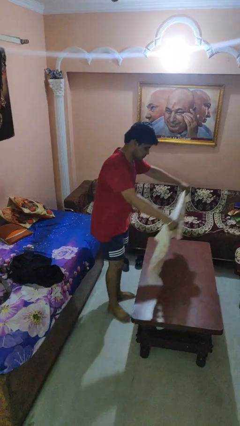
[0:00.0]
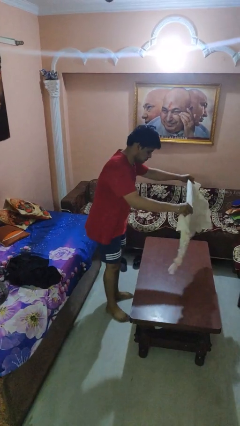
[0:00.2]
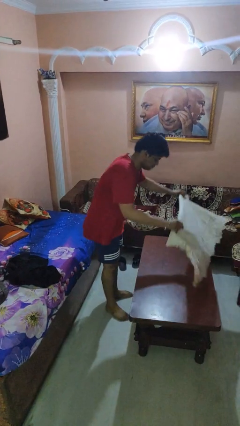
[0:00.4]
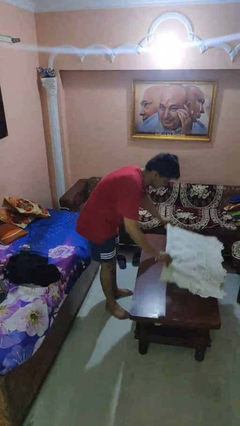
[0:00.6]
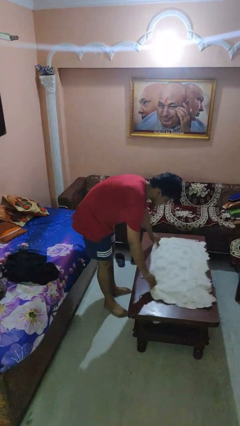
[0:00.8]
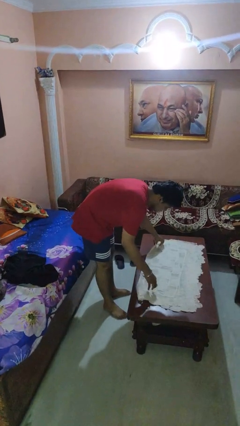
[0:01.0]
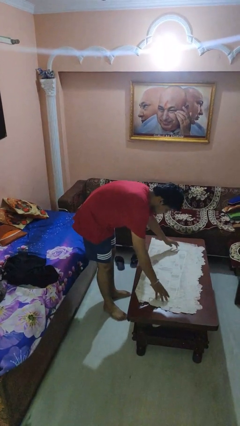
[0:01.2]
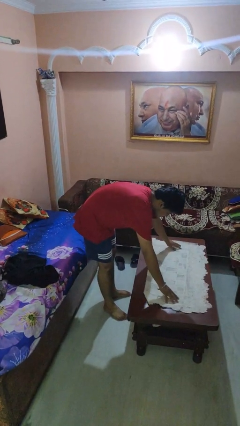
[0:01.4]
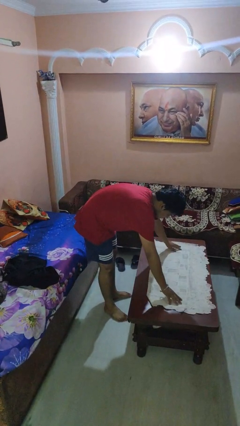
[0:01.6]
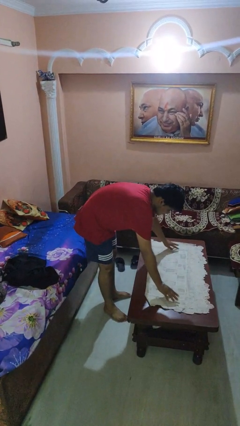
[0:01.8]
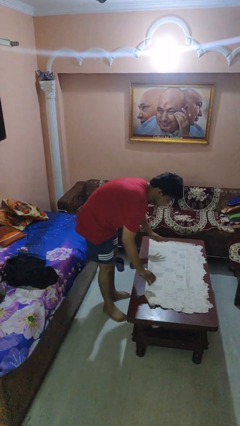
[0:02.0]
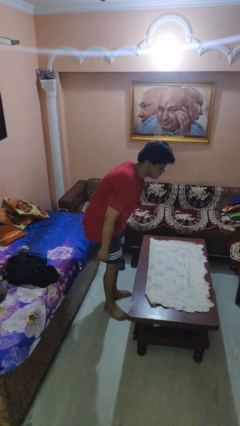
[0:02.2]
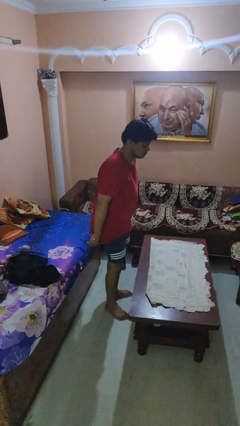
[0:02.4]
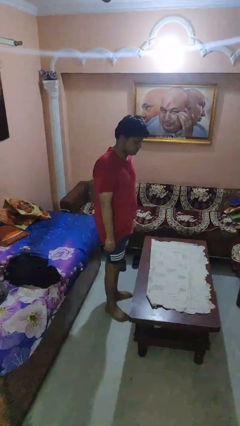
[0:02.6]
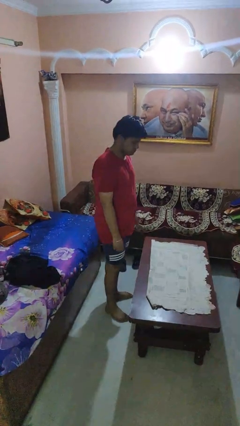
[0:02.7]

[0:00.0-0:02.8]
person spreads tablecloth

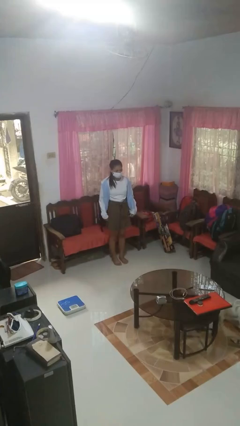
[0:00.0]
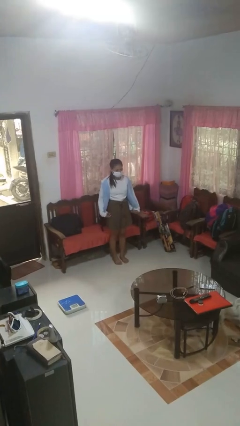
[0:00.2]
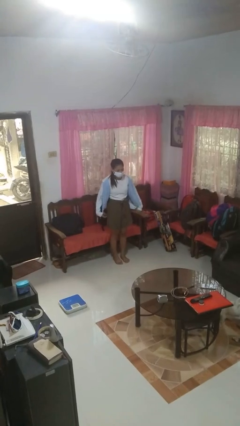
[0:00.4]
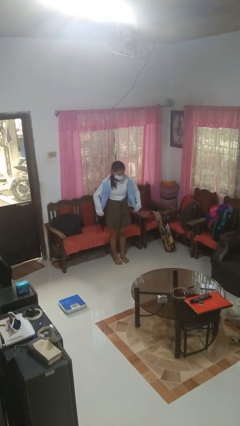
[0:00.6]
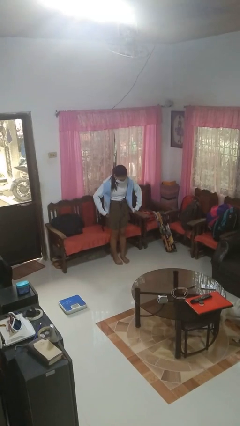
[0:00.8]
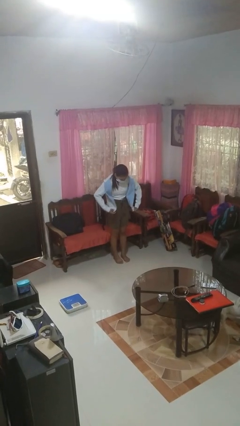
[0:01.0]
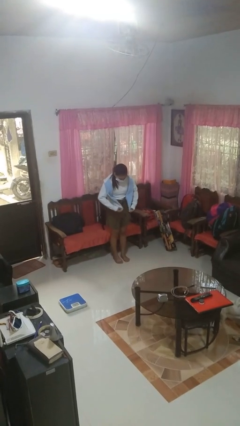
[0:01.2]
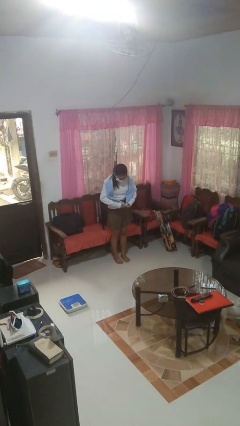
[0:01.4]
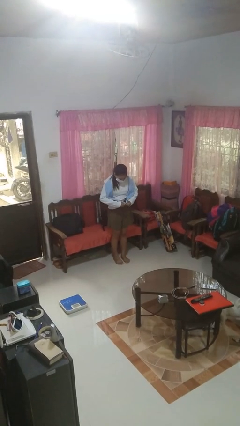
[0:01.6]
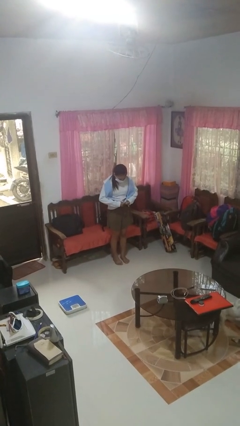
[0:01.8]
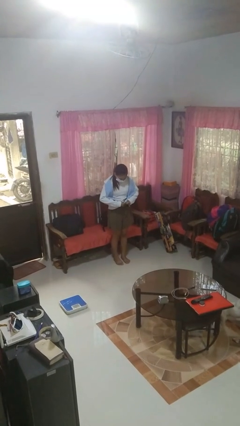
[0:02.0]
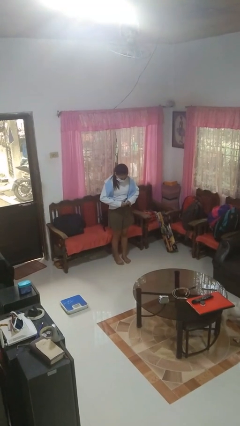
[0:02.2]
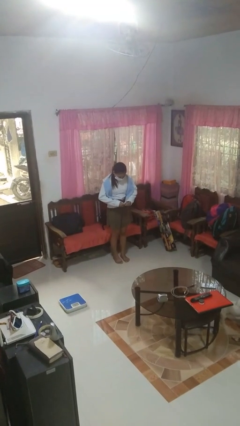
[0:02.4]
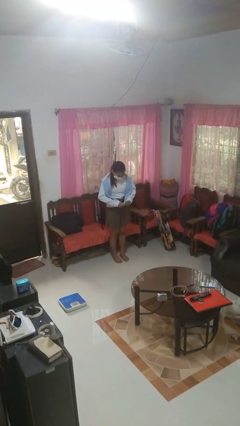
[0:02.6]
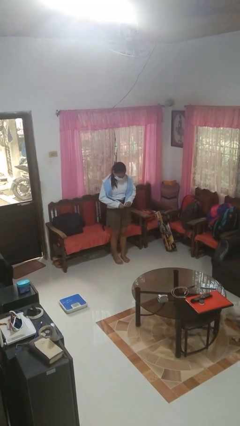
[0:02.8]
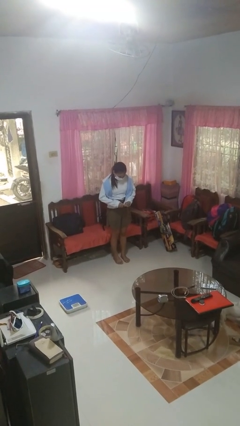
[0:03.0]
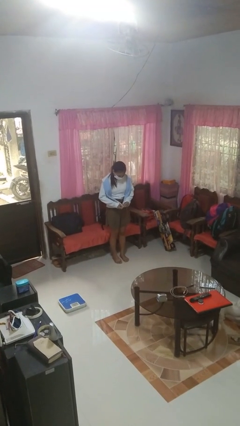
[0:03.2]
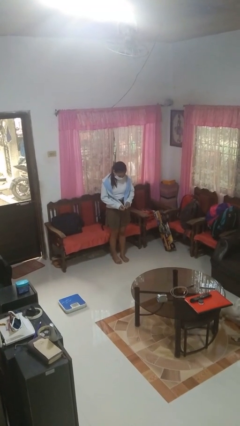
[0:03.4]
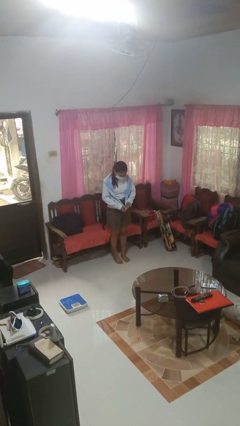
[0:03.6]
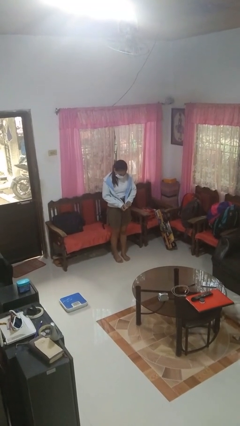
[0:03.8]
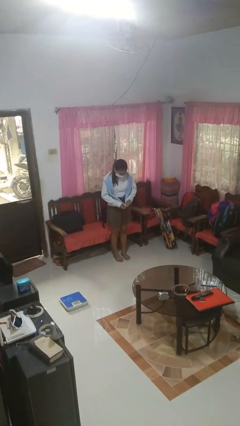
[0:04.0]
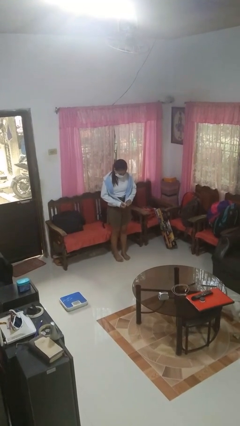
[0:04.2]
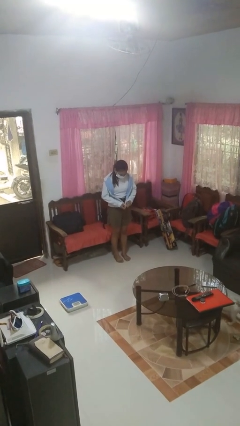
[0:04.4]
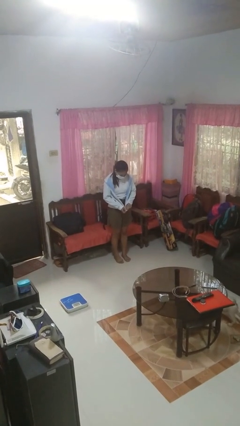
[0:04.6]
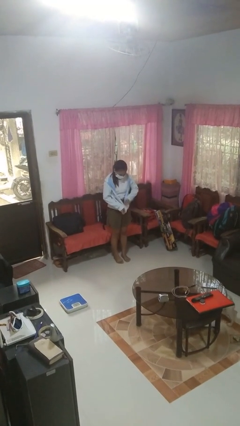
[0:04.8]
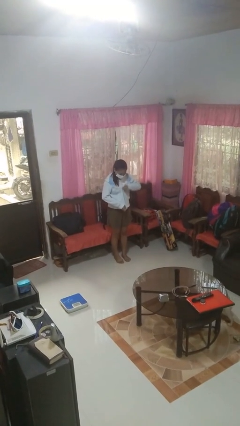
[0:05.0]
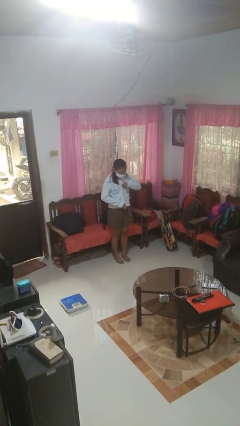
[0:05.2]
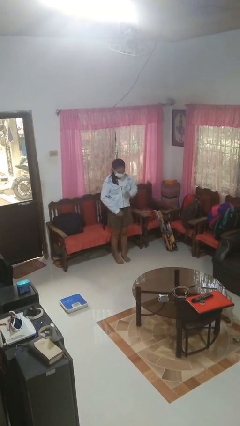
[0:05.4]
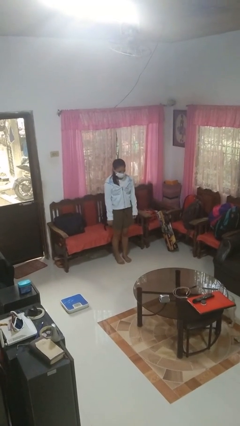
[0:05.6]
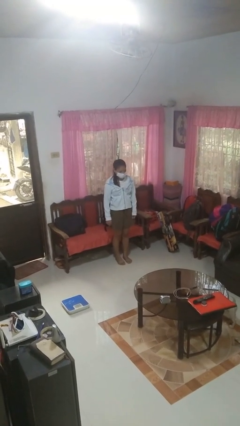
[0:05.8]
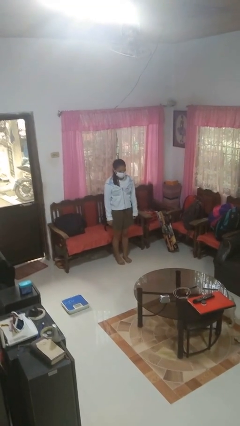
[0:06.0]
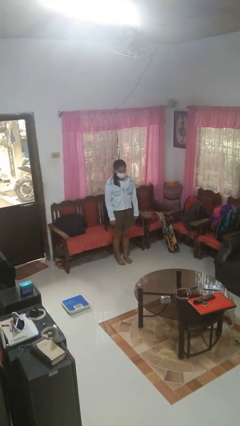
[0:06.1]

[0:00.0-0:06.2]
person zips up jacket

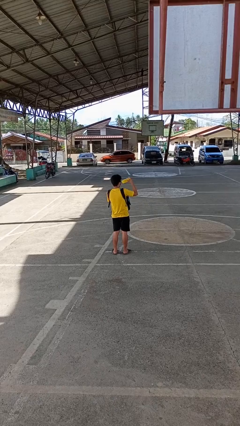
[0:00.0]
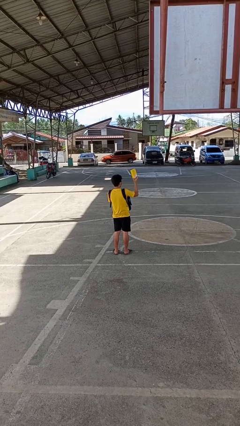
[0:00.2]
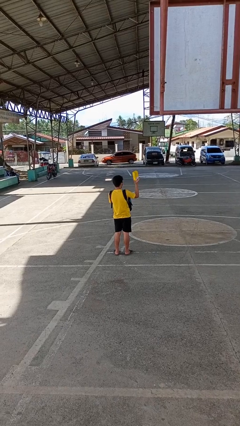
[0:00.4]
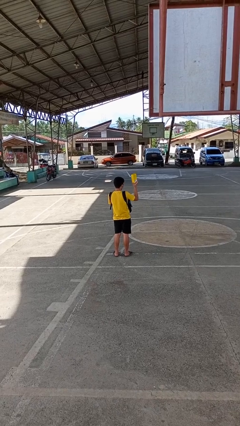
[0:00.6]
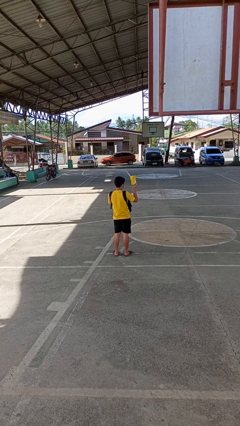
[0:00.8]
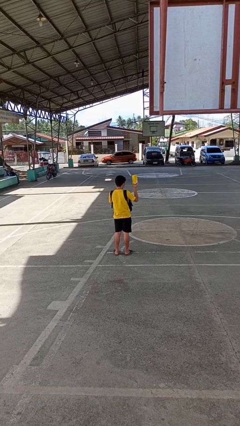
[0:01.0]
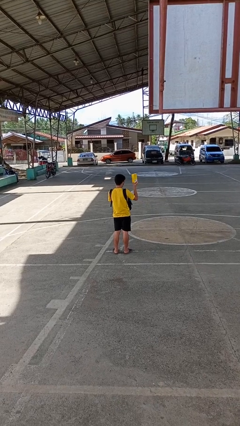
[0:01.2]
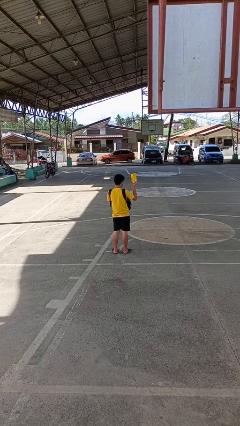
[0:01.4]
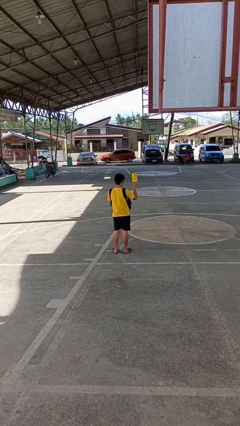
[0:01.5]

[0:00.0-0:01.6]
person takes object from backpack

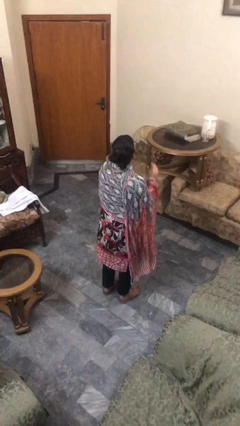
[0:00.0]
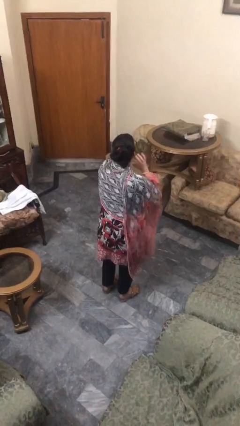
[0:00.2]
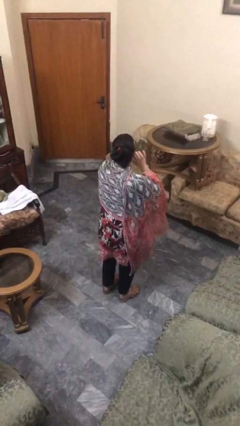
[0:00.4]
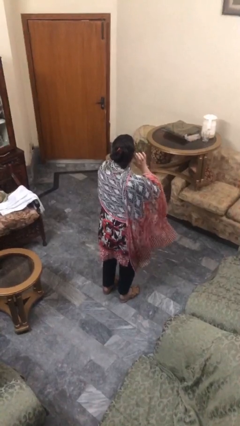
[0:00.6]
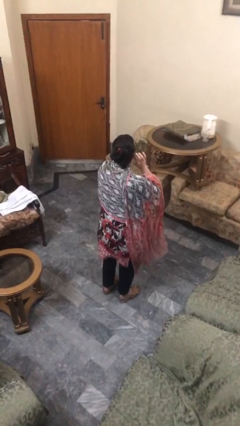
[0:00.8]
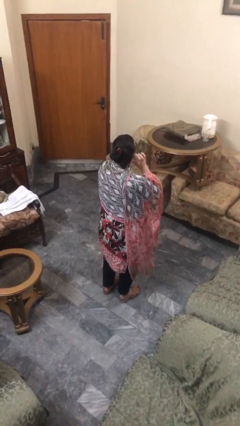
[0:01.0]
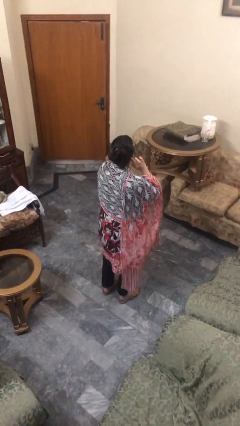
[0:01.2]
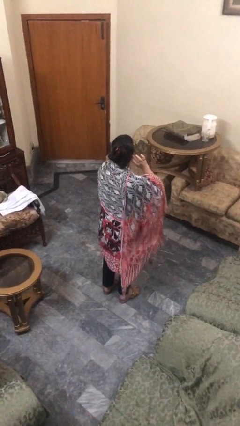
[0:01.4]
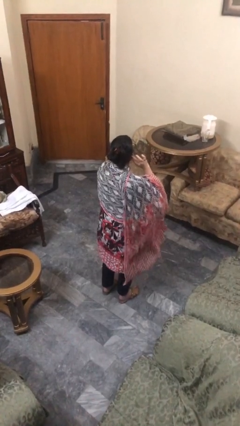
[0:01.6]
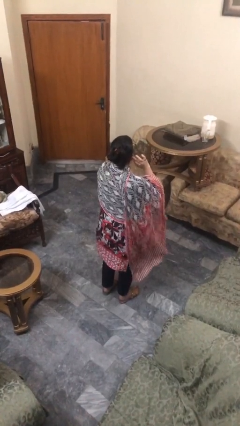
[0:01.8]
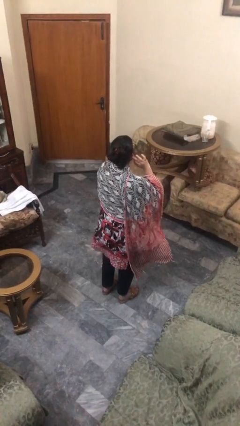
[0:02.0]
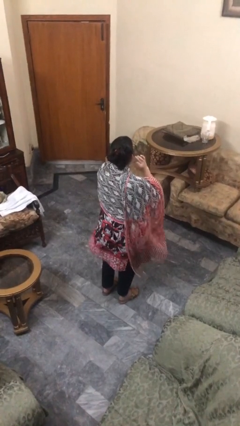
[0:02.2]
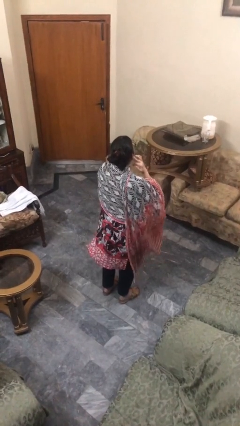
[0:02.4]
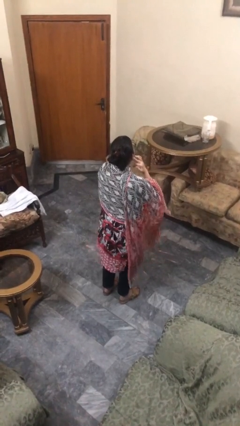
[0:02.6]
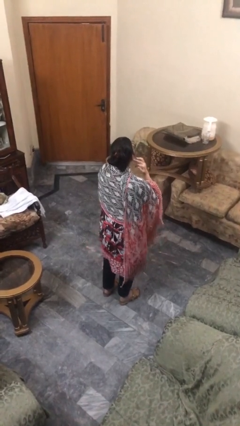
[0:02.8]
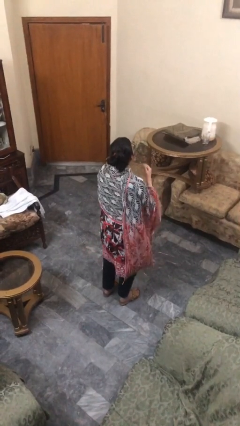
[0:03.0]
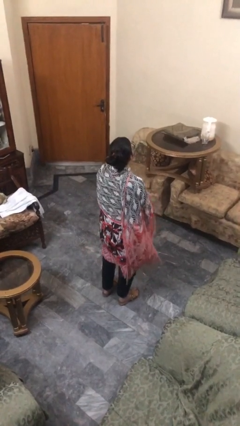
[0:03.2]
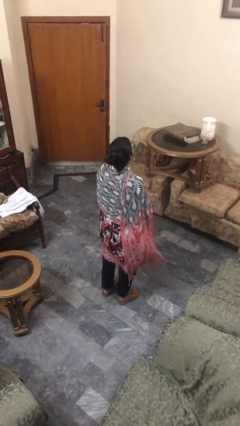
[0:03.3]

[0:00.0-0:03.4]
person touches earlobe

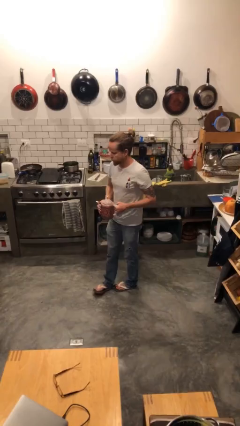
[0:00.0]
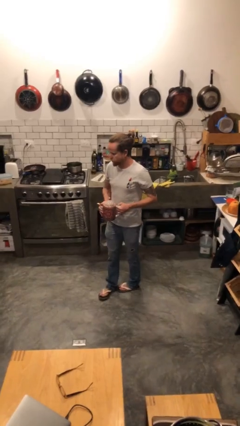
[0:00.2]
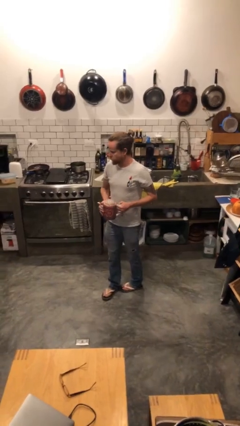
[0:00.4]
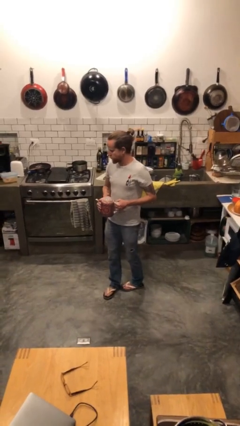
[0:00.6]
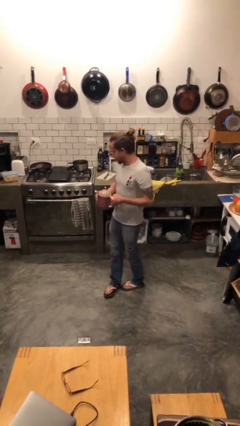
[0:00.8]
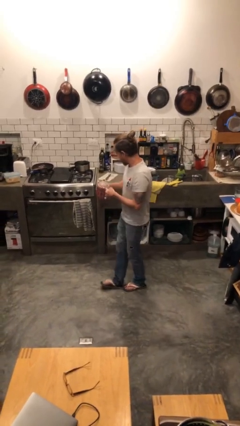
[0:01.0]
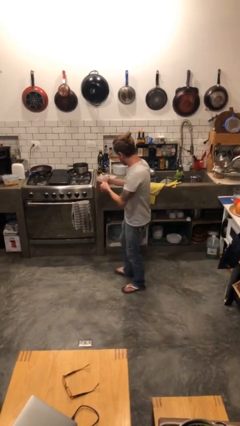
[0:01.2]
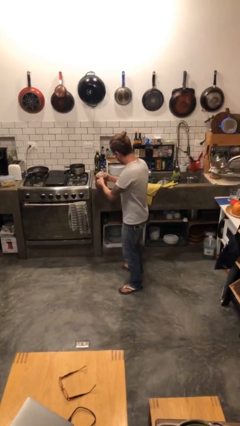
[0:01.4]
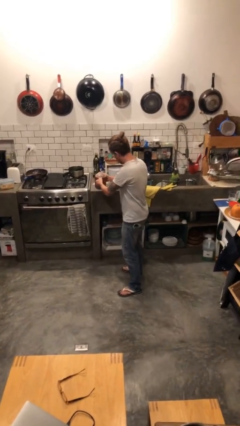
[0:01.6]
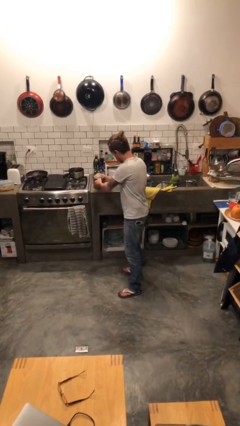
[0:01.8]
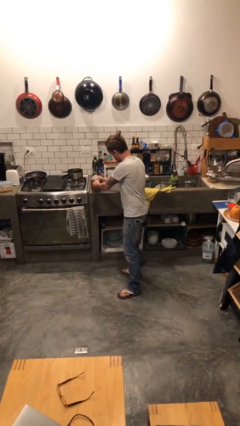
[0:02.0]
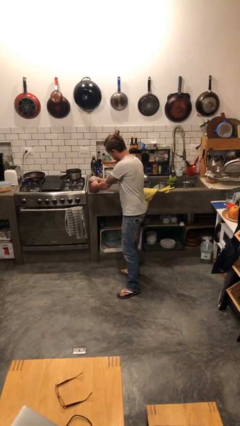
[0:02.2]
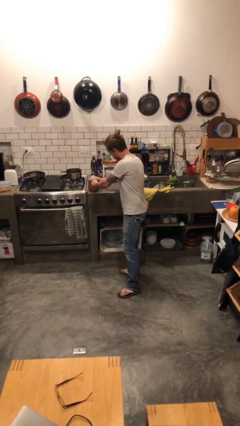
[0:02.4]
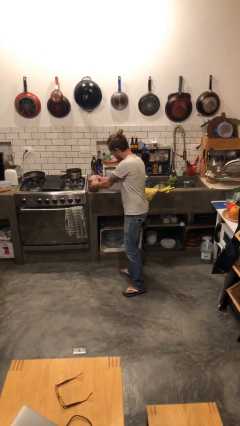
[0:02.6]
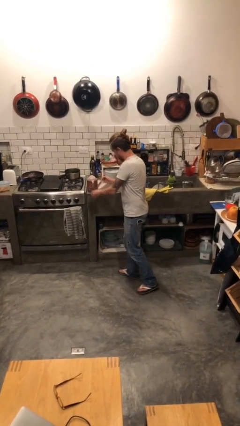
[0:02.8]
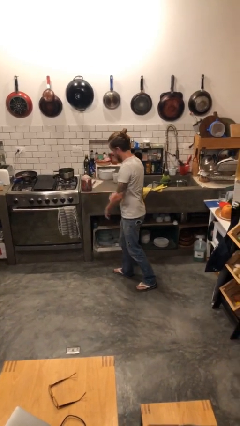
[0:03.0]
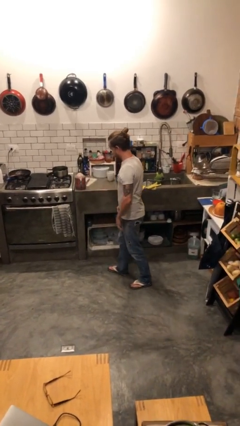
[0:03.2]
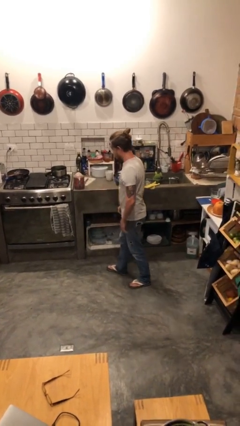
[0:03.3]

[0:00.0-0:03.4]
person puts down object on countertop
